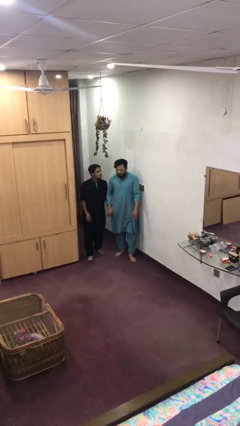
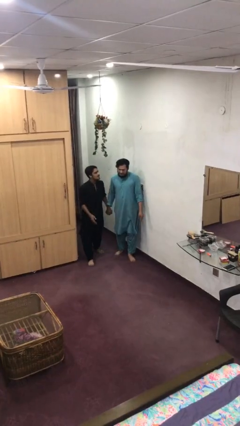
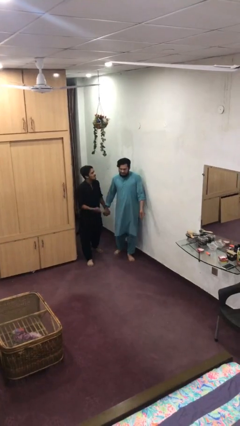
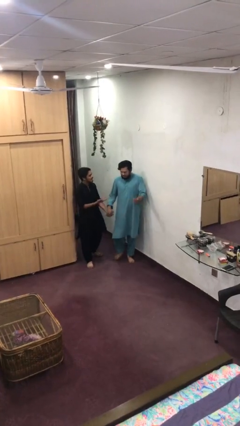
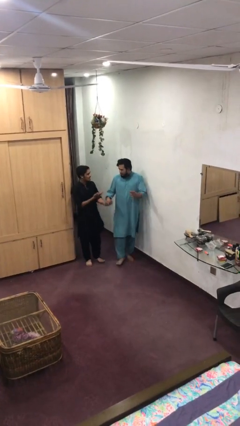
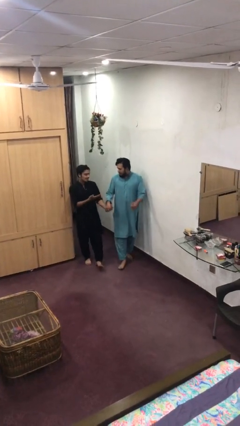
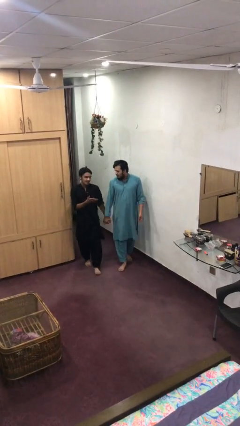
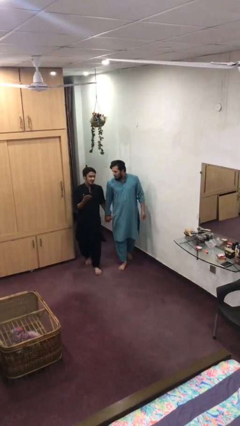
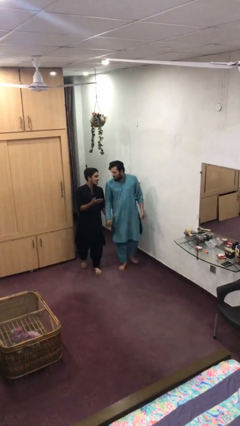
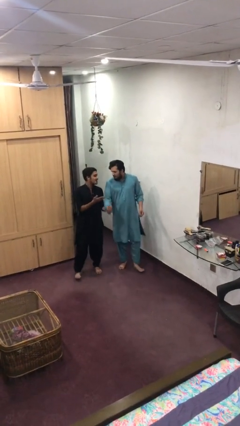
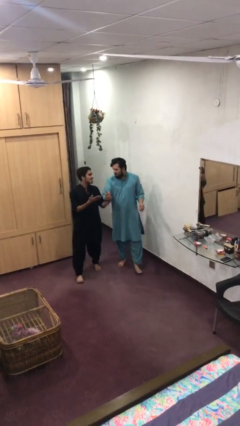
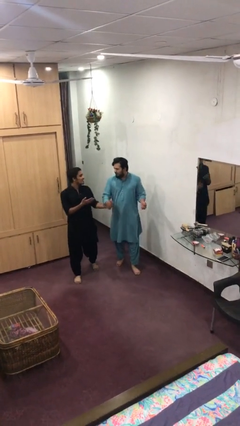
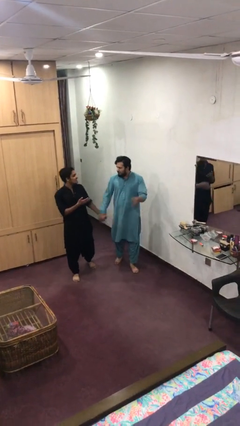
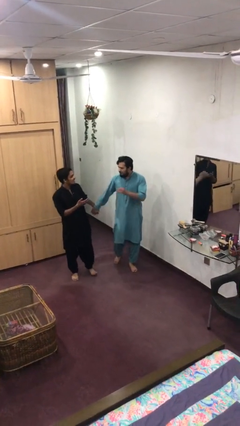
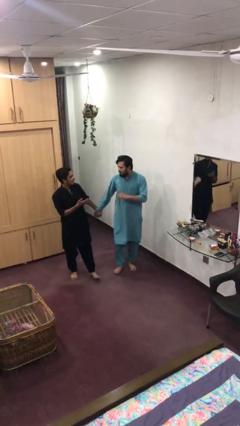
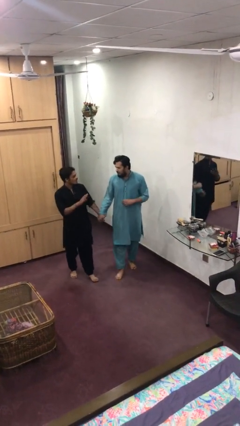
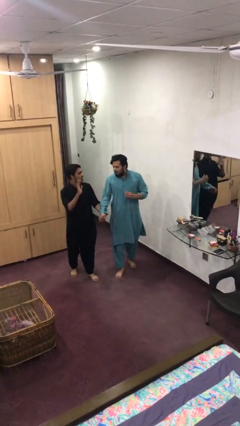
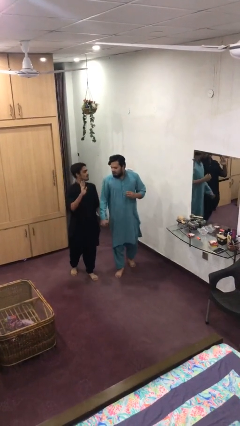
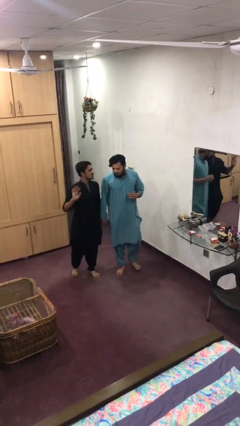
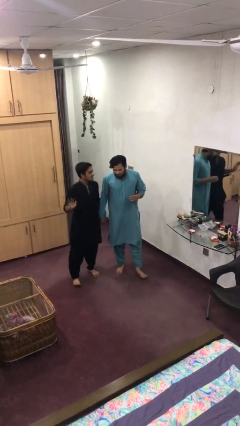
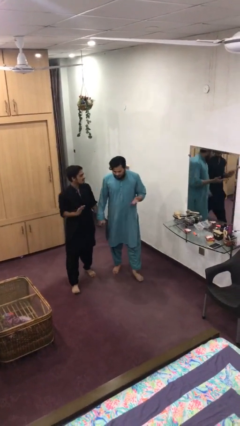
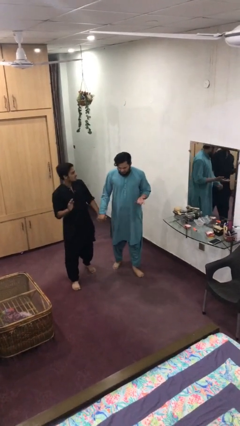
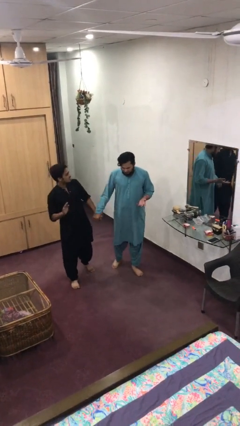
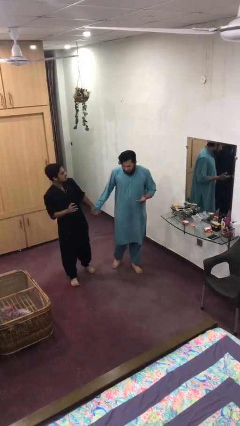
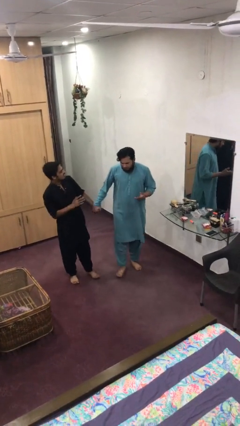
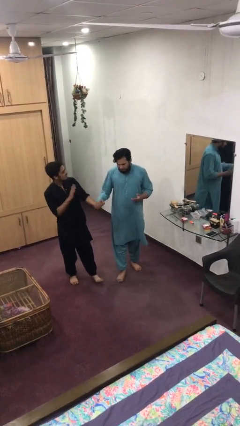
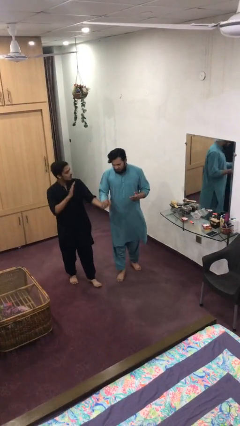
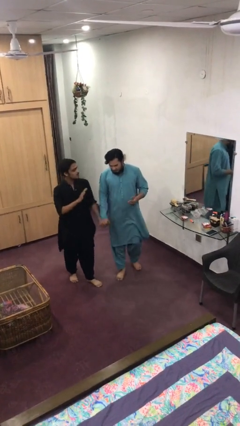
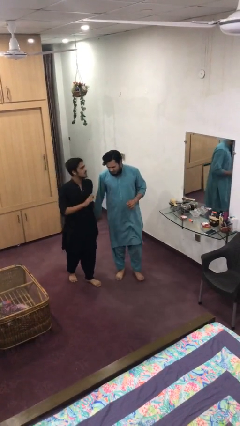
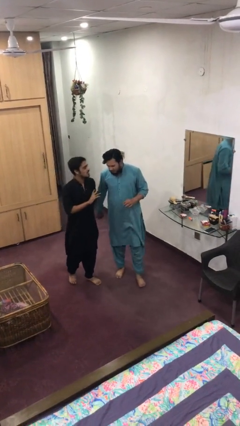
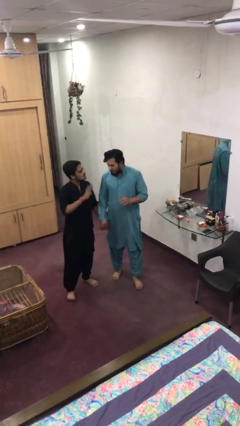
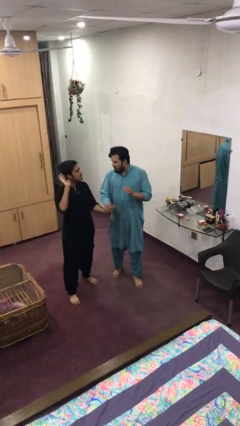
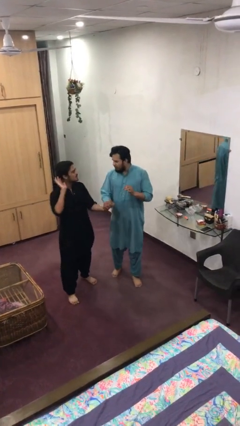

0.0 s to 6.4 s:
person holds hand

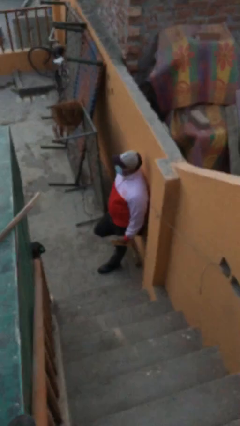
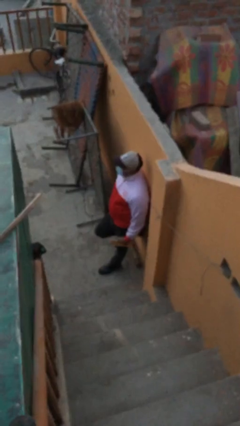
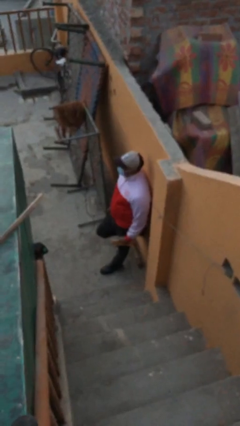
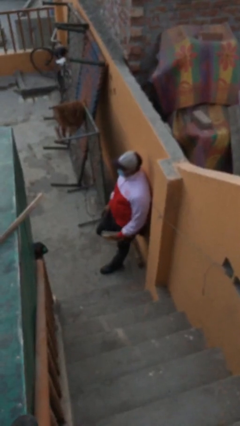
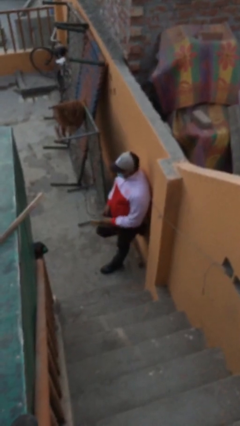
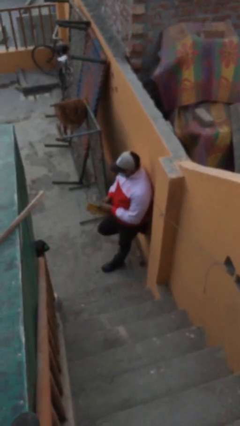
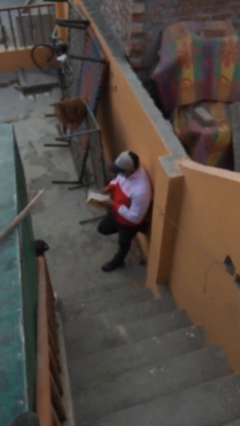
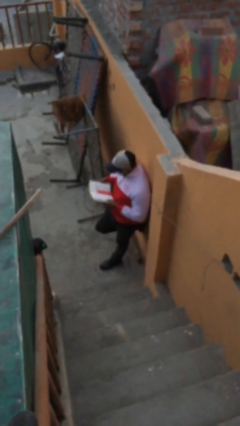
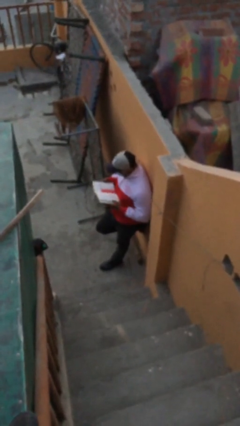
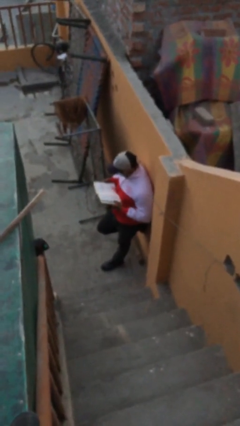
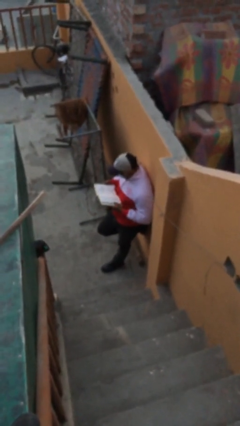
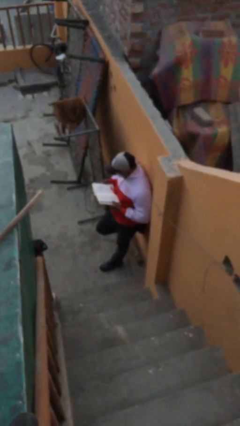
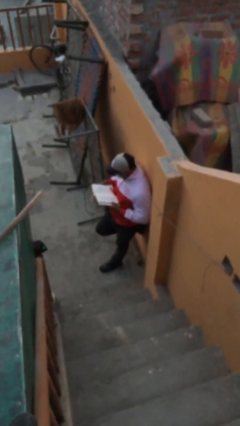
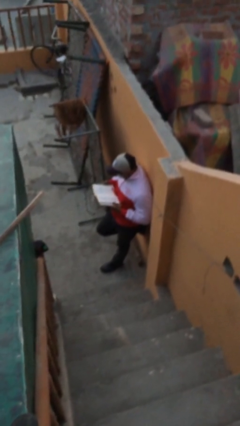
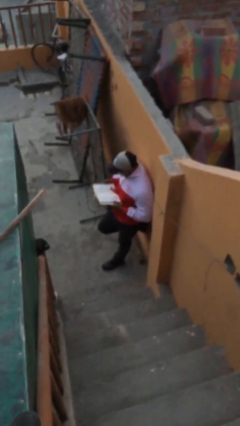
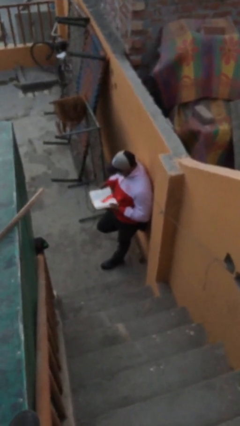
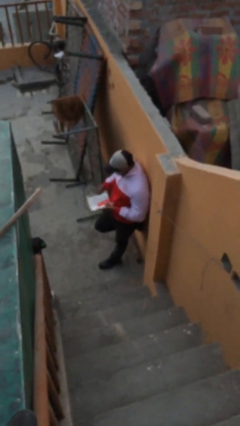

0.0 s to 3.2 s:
person reads document

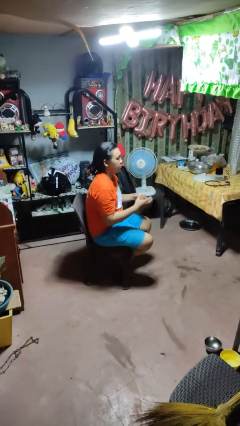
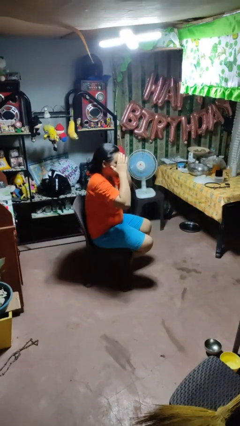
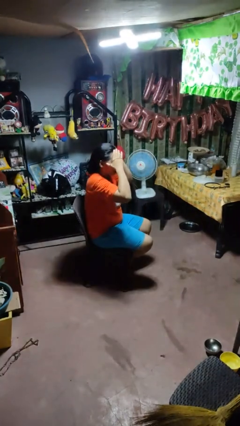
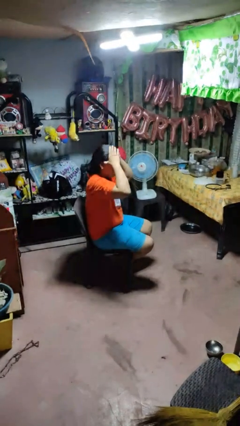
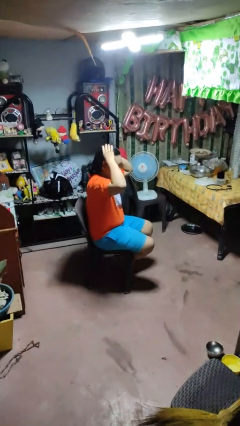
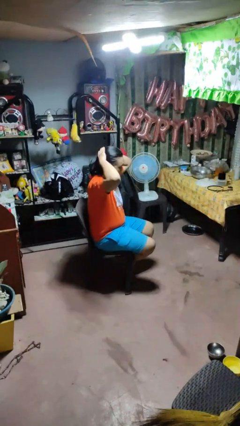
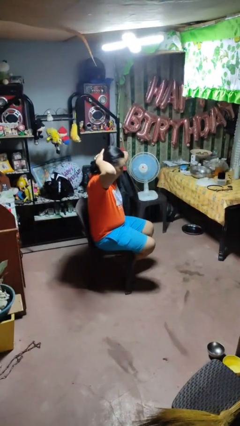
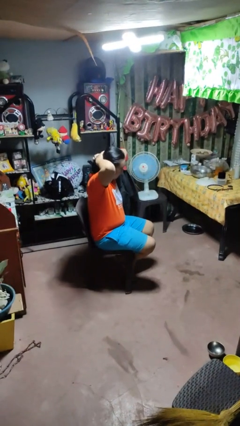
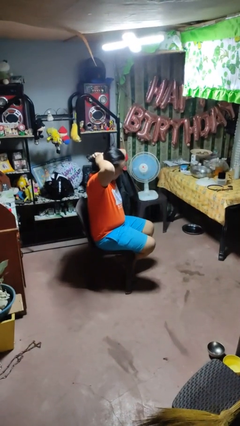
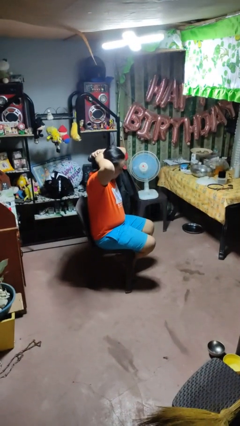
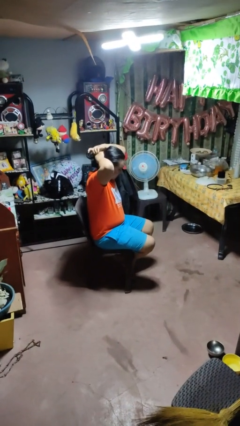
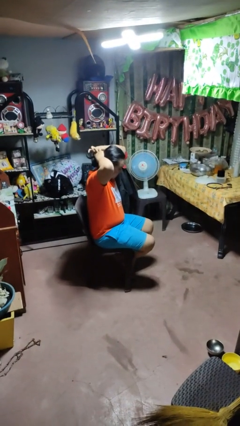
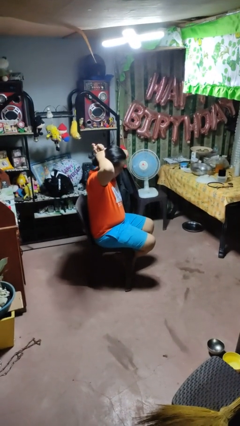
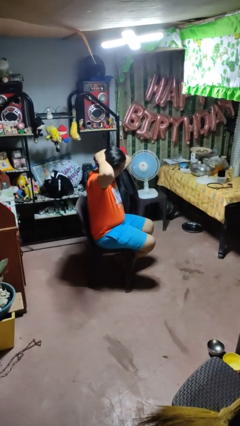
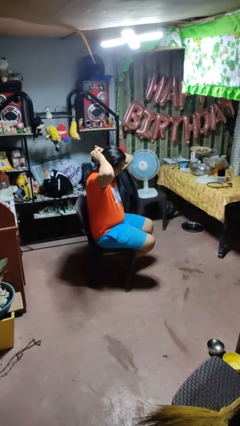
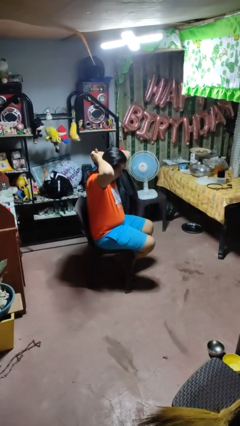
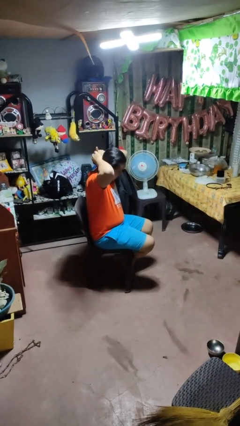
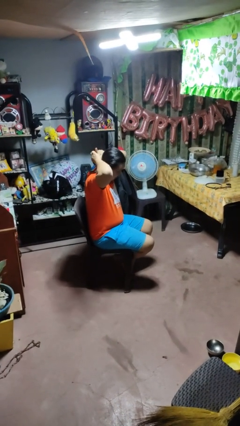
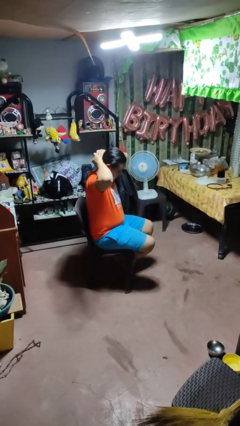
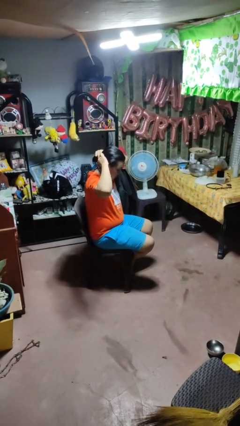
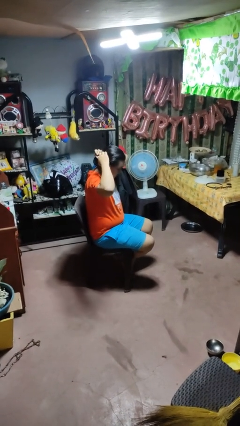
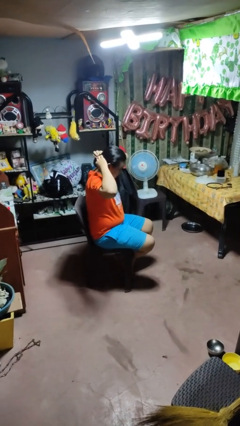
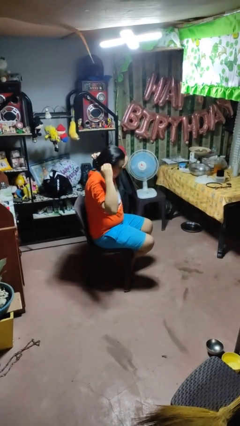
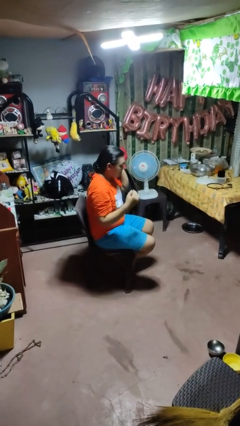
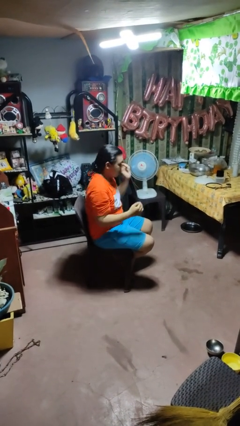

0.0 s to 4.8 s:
person puts hair in ponytail

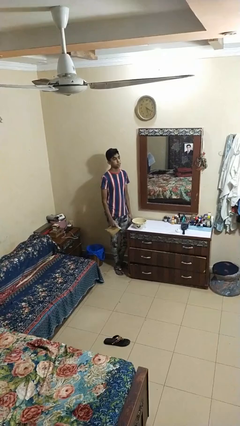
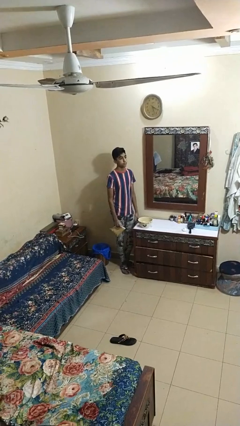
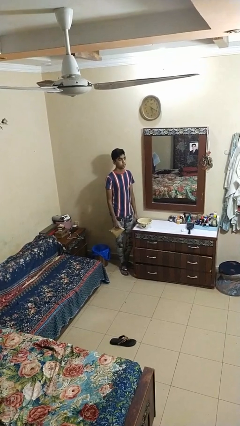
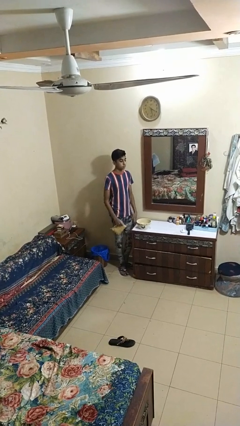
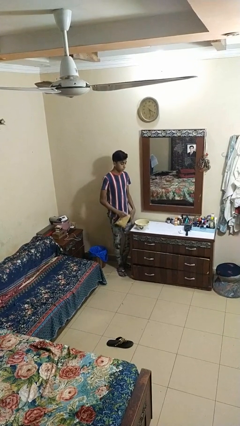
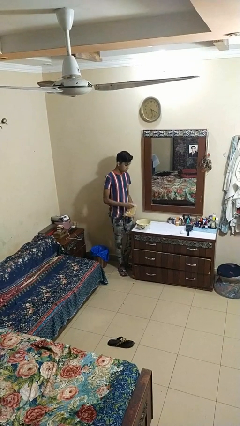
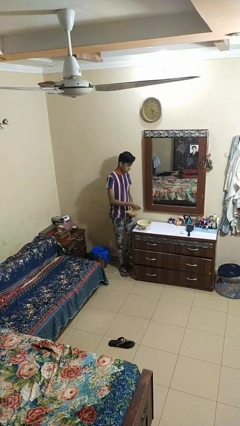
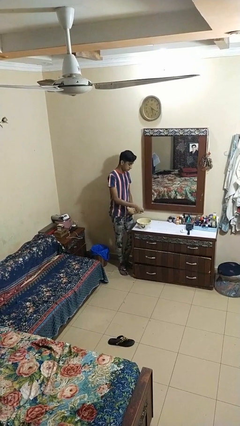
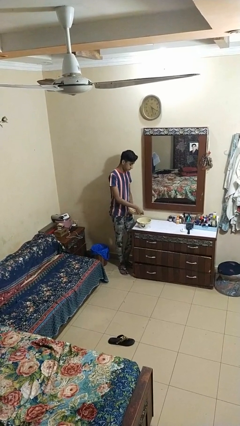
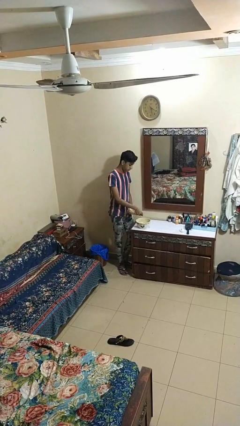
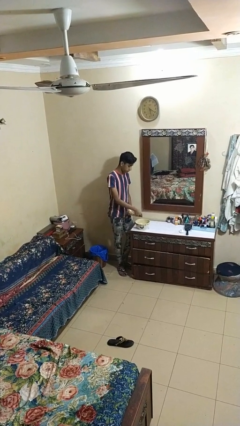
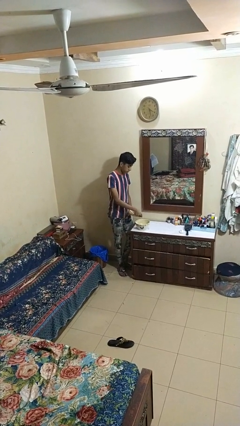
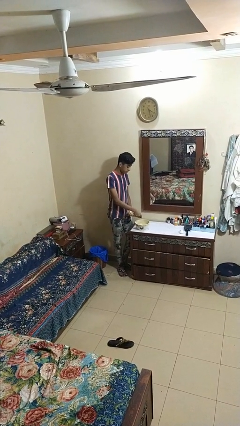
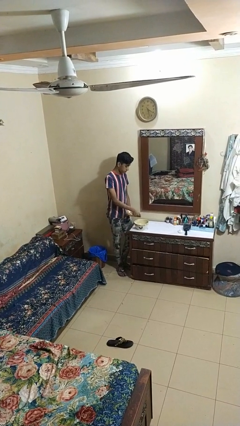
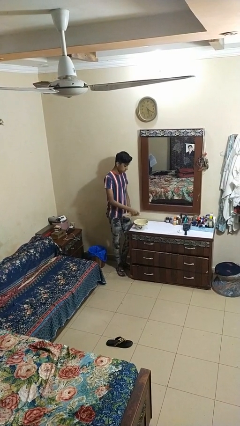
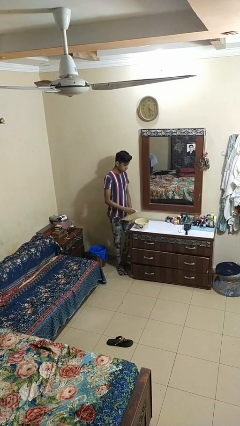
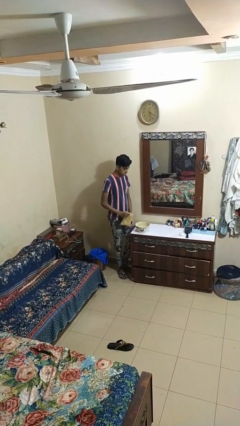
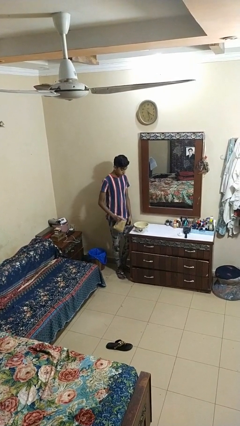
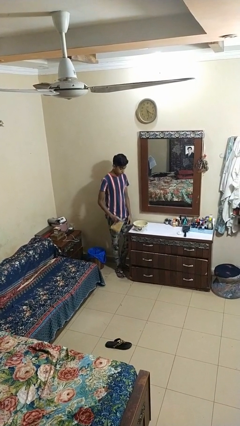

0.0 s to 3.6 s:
person pours into bowl
